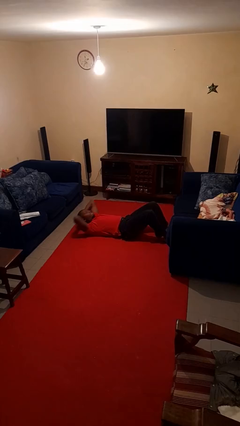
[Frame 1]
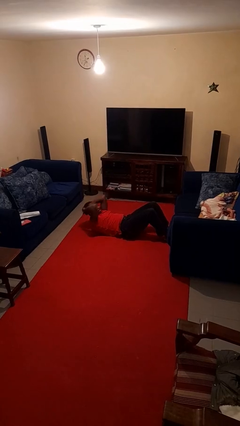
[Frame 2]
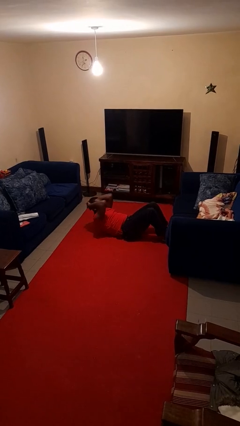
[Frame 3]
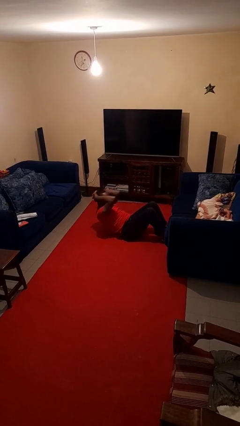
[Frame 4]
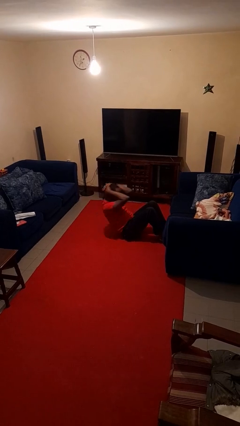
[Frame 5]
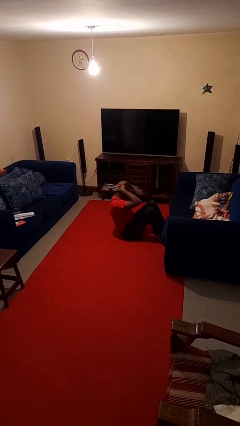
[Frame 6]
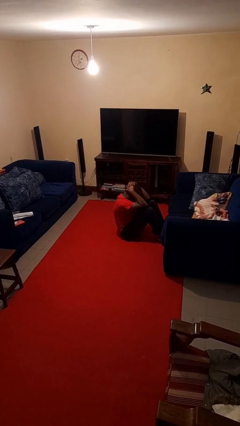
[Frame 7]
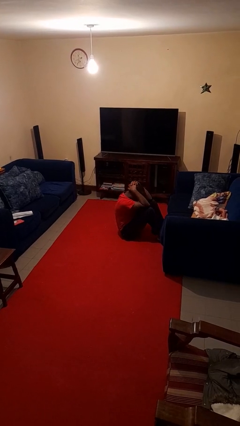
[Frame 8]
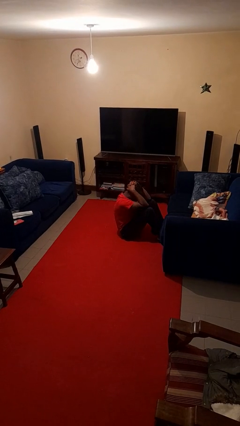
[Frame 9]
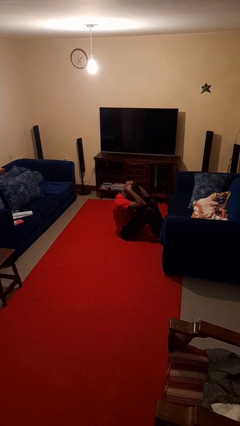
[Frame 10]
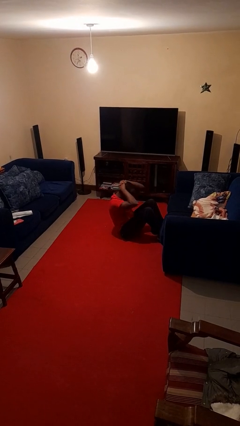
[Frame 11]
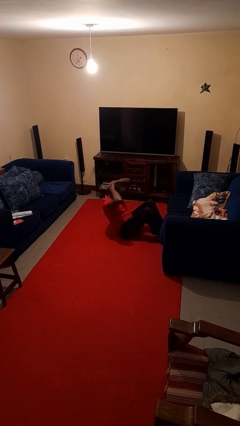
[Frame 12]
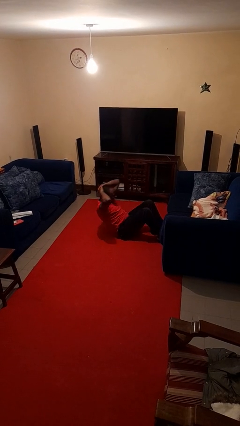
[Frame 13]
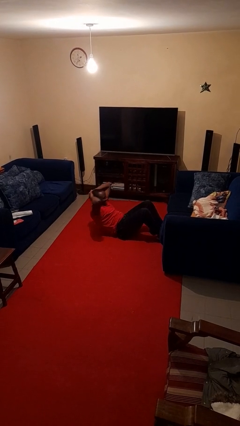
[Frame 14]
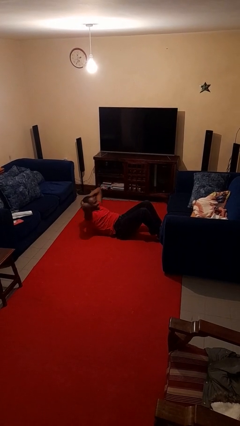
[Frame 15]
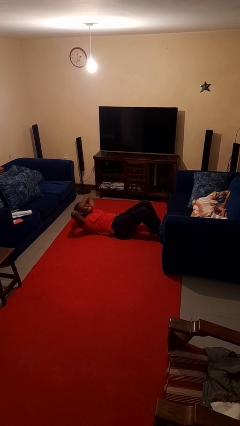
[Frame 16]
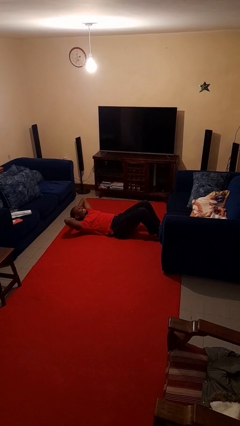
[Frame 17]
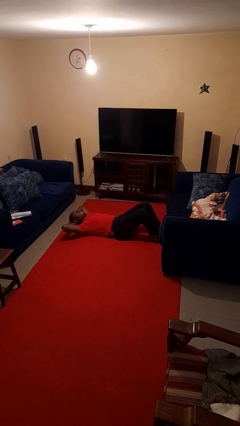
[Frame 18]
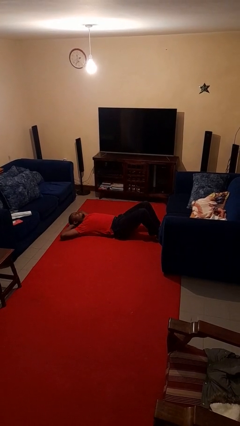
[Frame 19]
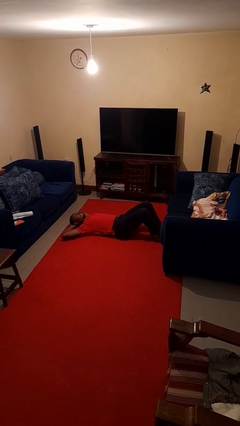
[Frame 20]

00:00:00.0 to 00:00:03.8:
person exercises with situp

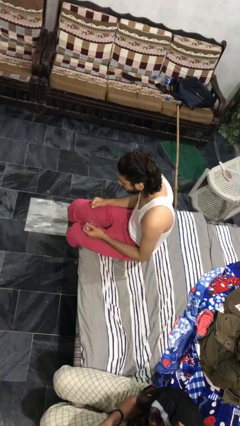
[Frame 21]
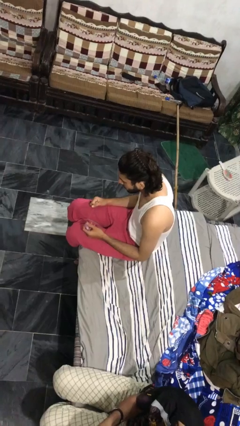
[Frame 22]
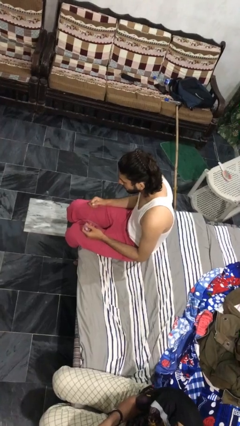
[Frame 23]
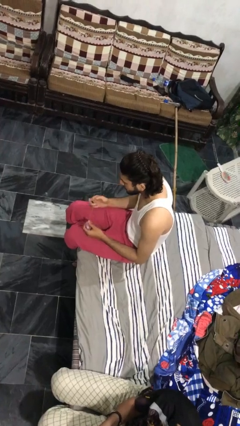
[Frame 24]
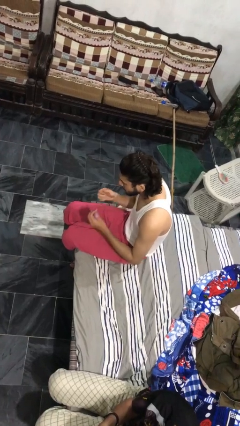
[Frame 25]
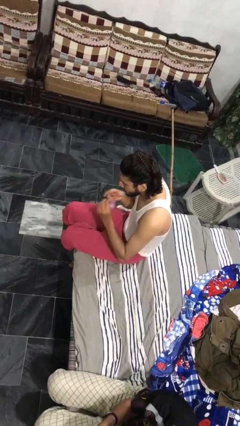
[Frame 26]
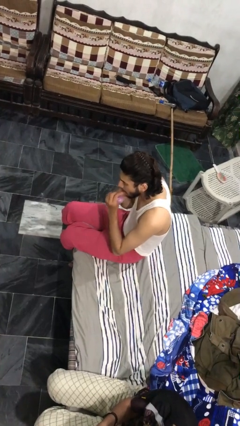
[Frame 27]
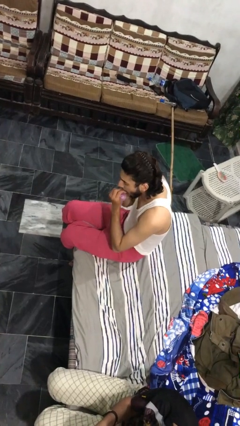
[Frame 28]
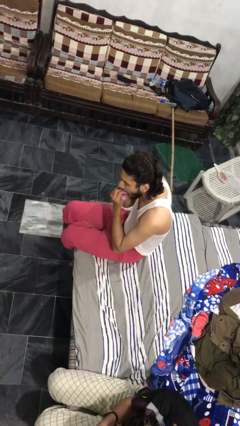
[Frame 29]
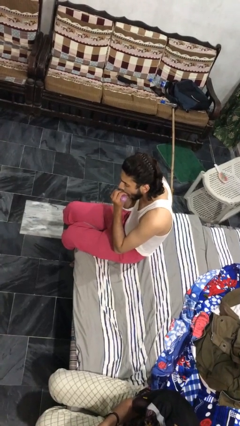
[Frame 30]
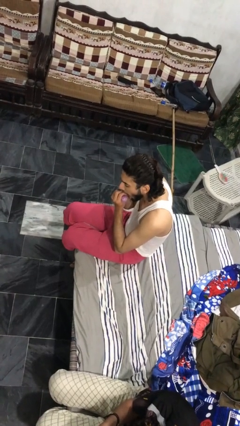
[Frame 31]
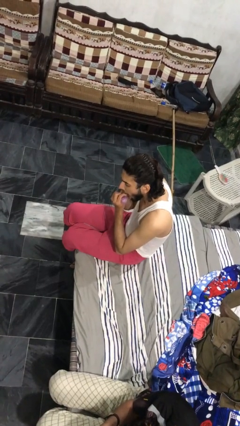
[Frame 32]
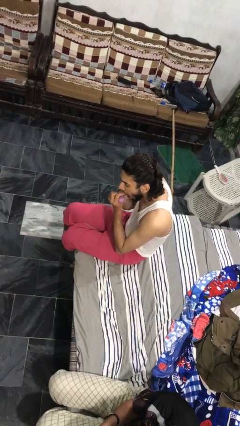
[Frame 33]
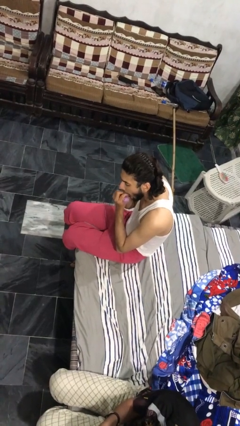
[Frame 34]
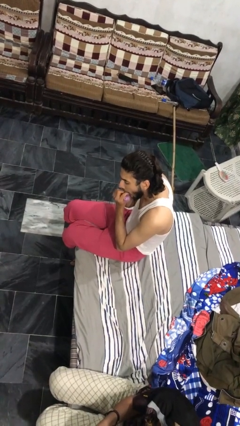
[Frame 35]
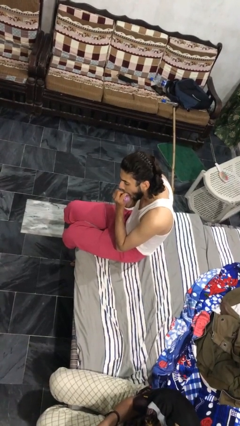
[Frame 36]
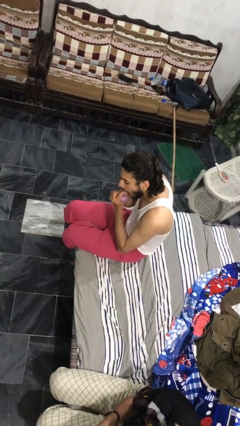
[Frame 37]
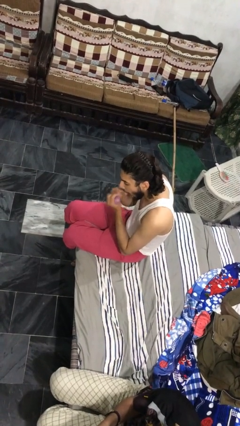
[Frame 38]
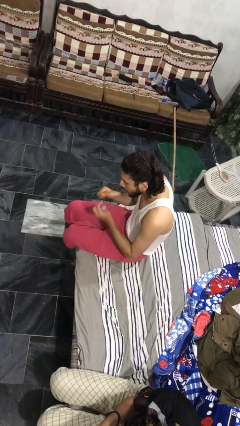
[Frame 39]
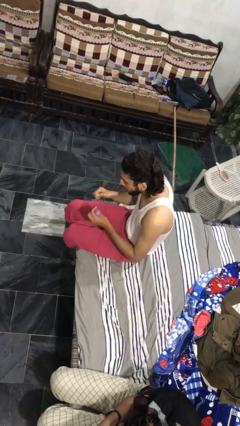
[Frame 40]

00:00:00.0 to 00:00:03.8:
person flosses

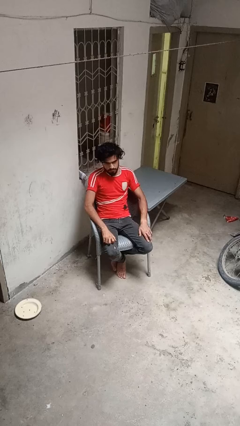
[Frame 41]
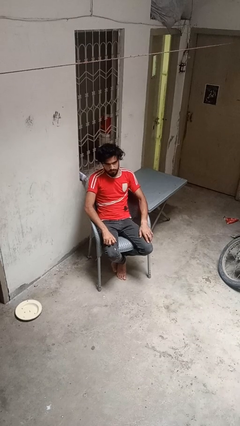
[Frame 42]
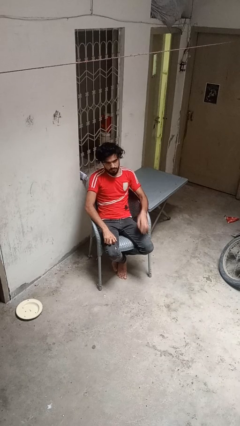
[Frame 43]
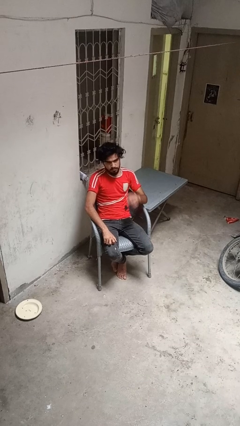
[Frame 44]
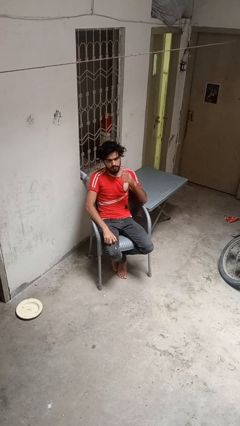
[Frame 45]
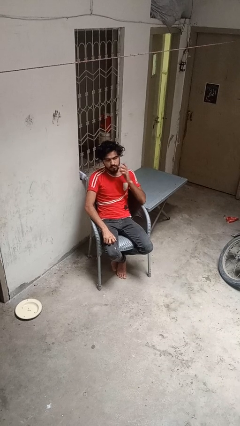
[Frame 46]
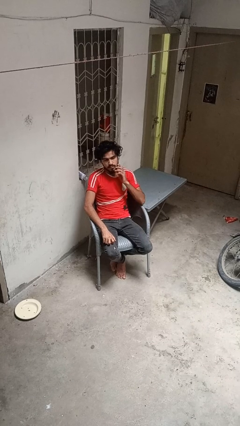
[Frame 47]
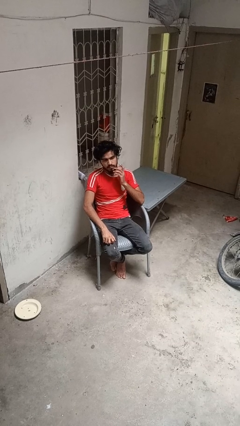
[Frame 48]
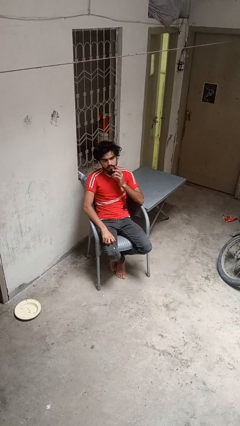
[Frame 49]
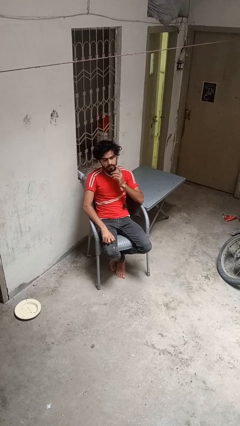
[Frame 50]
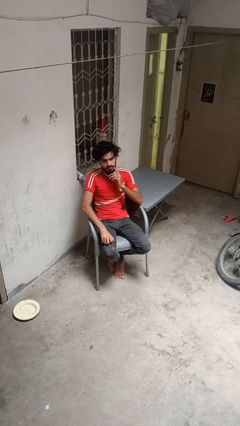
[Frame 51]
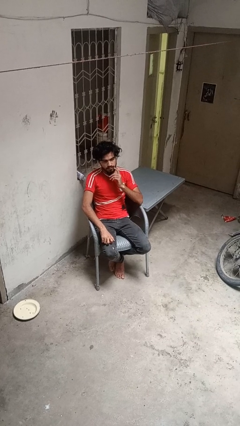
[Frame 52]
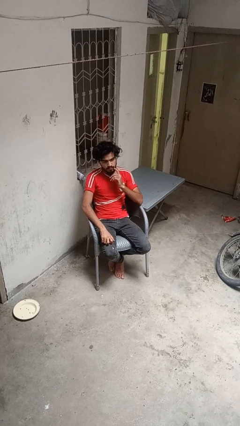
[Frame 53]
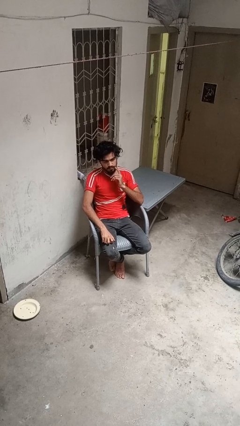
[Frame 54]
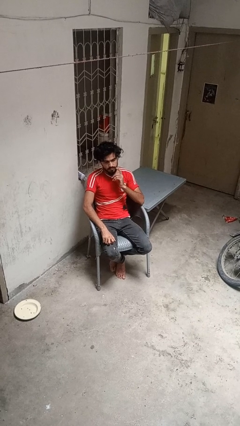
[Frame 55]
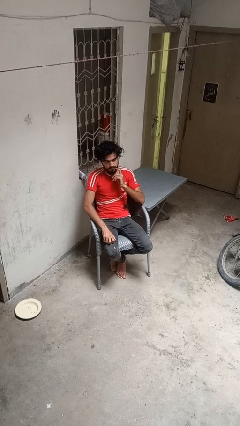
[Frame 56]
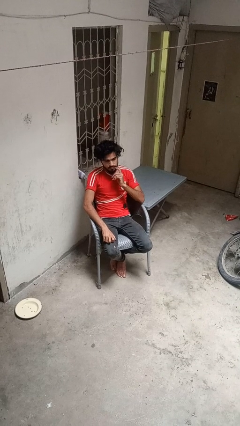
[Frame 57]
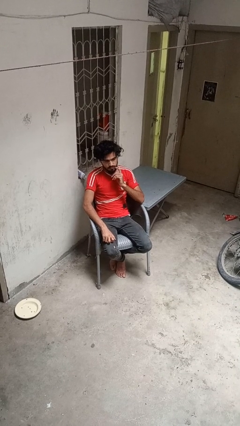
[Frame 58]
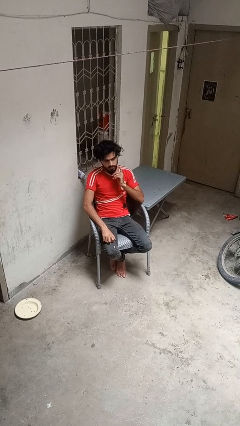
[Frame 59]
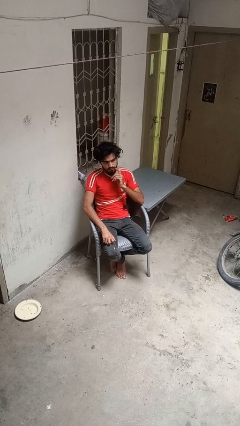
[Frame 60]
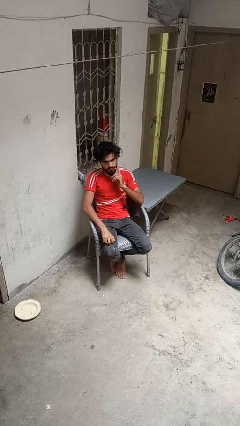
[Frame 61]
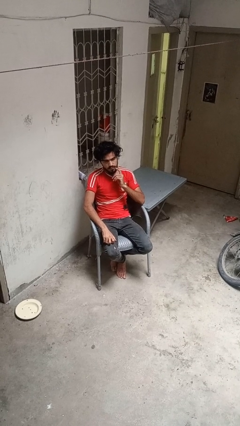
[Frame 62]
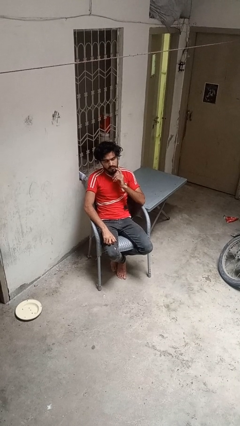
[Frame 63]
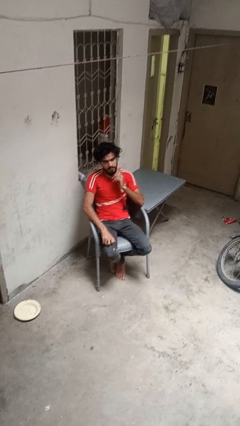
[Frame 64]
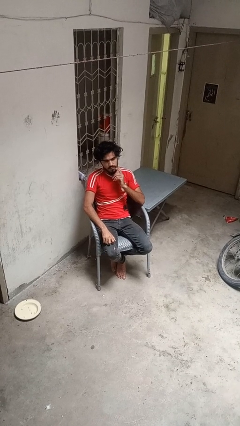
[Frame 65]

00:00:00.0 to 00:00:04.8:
person strokes chin

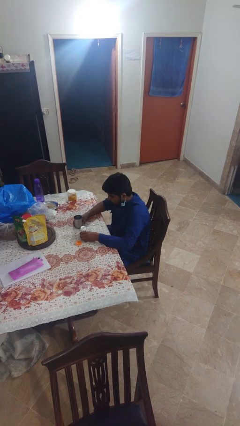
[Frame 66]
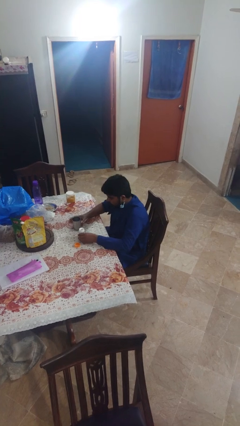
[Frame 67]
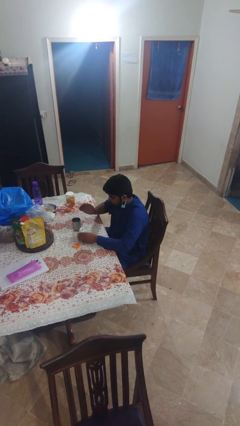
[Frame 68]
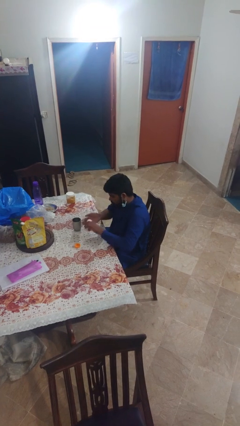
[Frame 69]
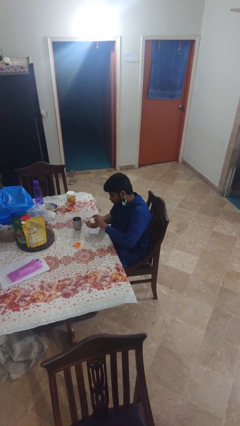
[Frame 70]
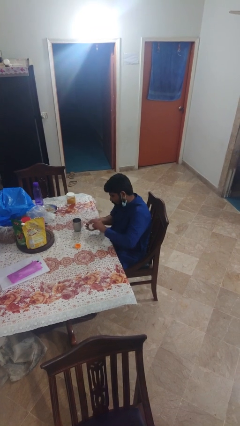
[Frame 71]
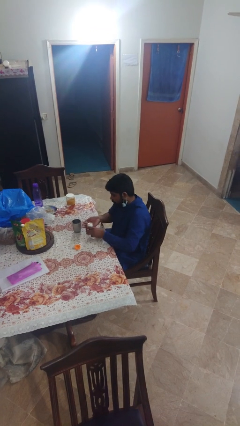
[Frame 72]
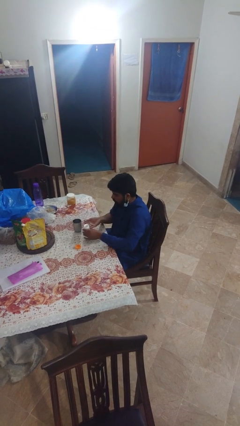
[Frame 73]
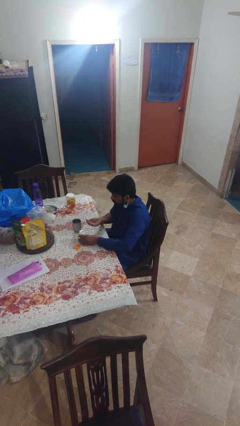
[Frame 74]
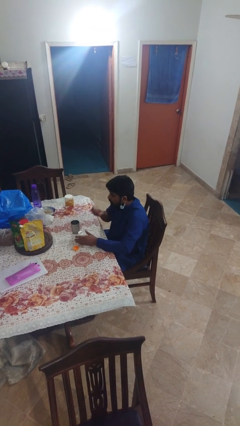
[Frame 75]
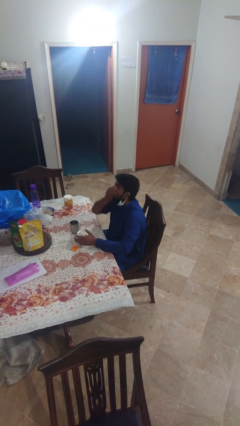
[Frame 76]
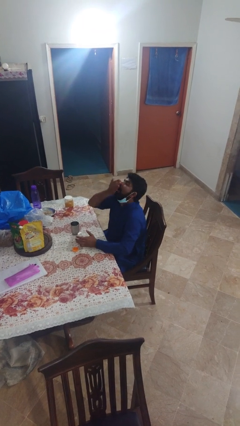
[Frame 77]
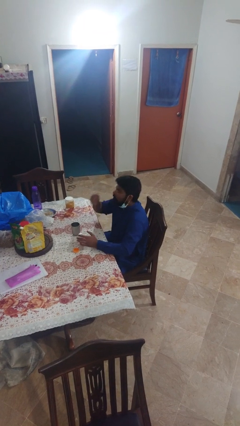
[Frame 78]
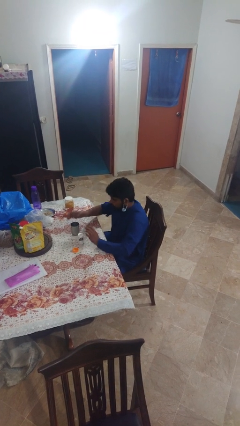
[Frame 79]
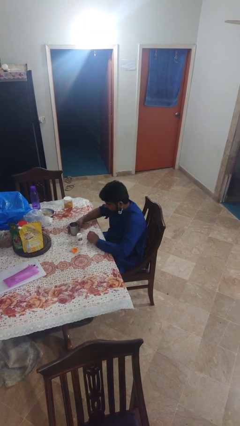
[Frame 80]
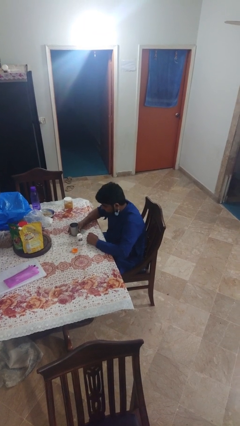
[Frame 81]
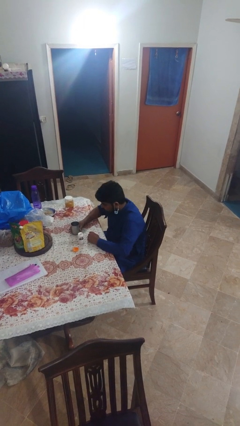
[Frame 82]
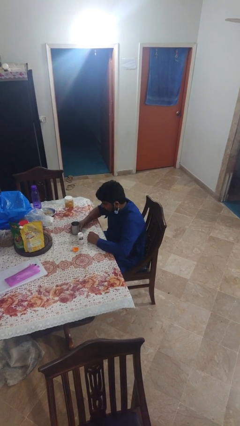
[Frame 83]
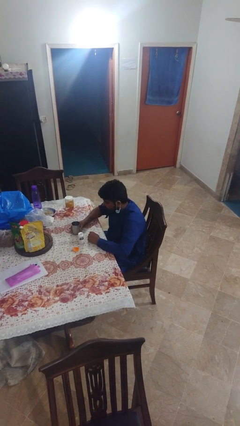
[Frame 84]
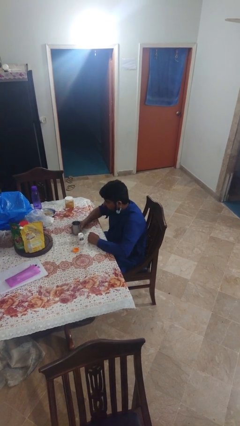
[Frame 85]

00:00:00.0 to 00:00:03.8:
person takes medicine pills

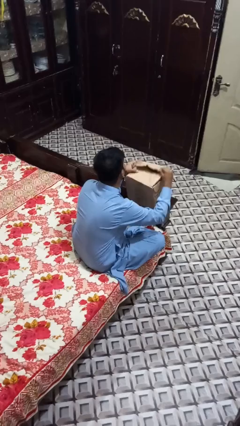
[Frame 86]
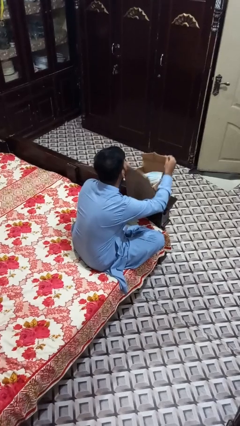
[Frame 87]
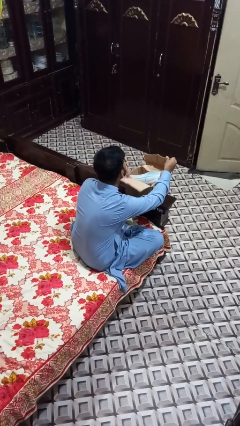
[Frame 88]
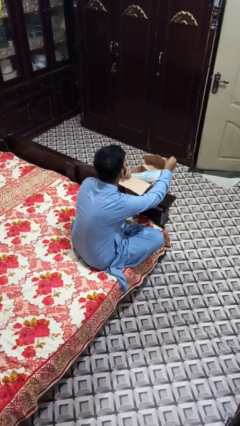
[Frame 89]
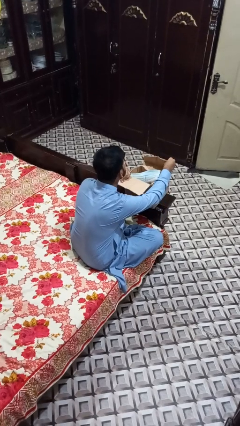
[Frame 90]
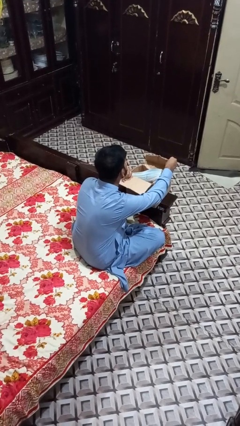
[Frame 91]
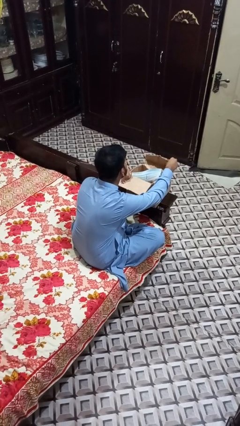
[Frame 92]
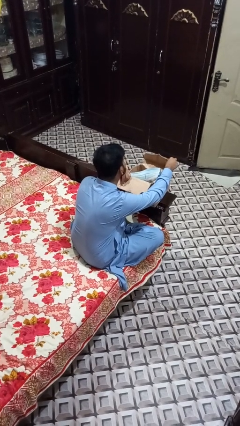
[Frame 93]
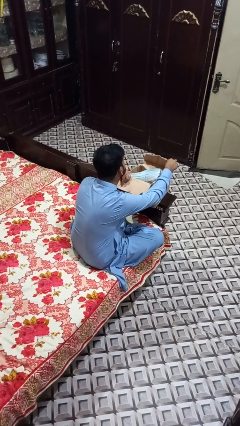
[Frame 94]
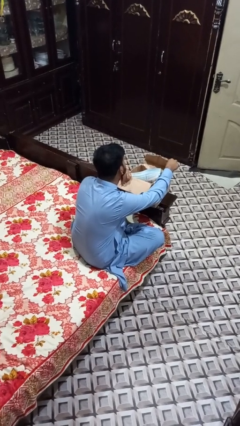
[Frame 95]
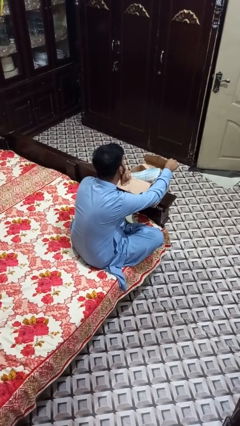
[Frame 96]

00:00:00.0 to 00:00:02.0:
person opens box
